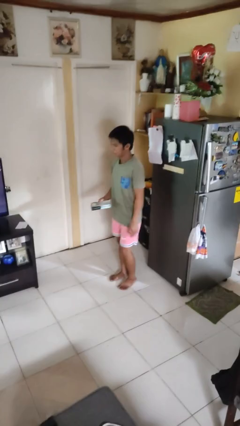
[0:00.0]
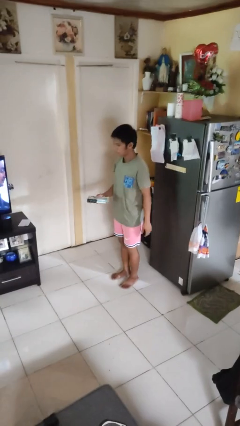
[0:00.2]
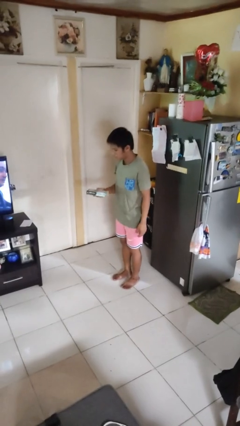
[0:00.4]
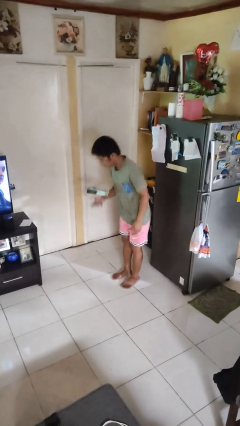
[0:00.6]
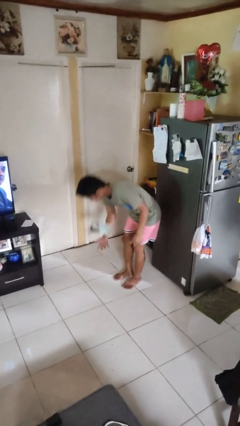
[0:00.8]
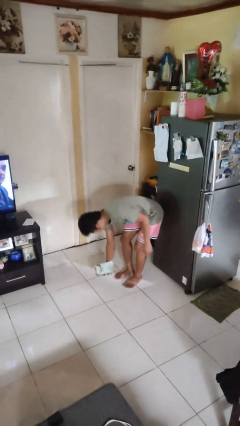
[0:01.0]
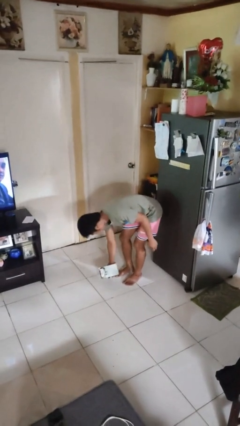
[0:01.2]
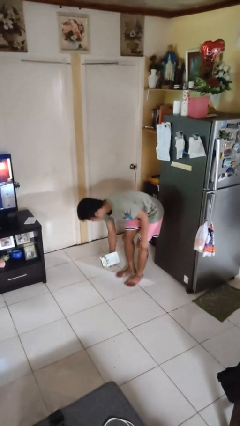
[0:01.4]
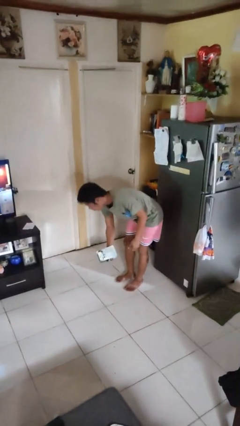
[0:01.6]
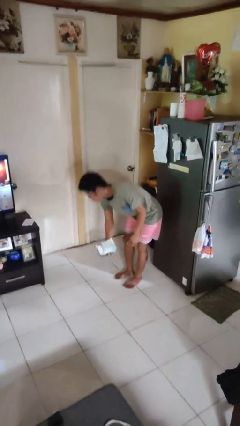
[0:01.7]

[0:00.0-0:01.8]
person drops object

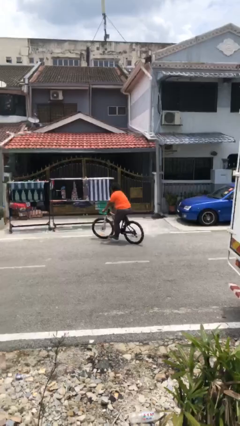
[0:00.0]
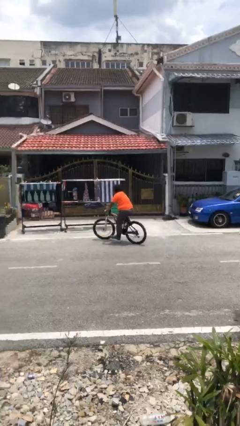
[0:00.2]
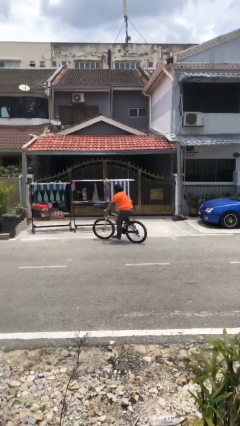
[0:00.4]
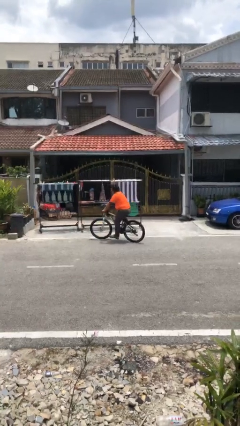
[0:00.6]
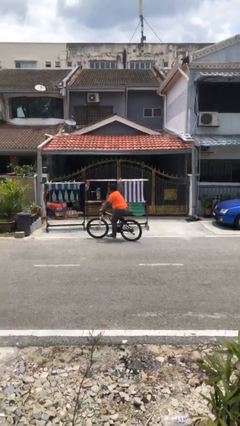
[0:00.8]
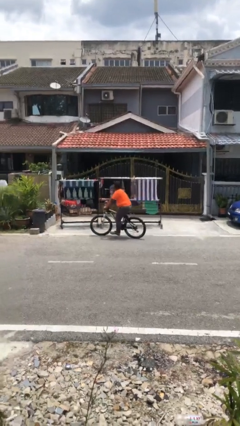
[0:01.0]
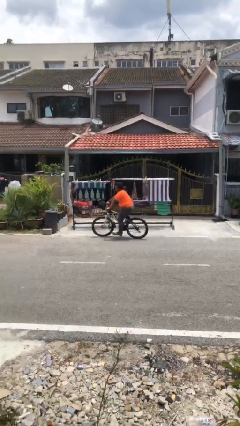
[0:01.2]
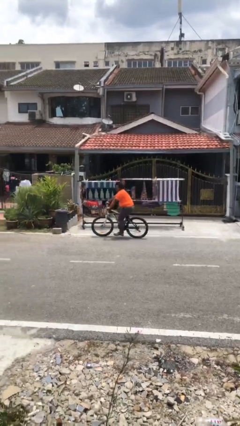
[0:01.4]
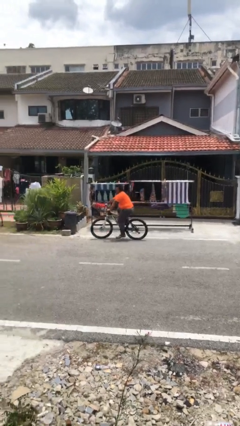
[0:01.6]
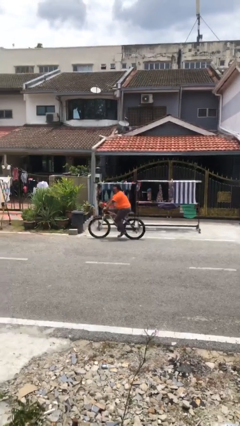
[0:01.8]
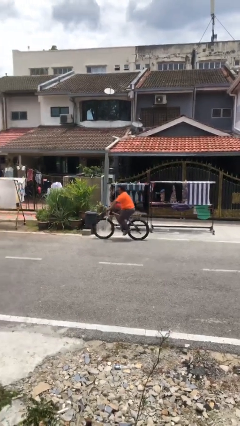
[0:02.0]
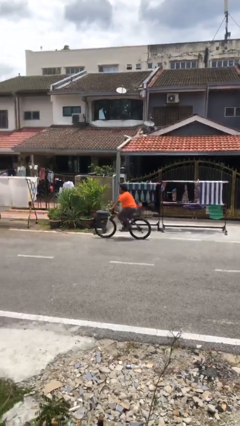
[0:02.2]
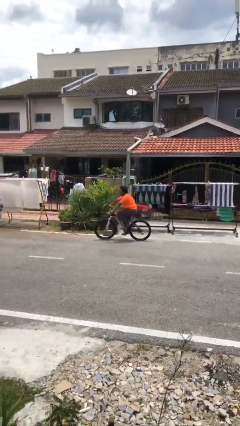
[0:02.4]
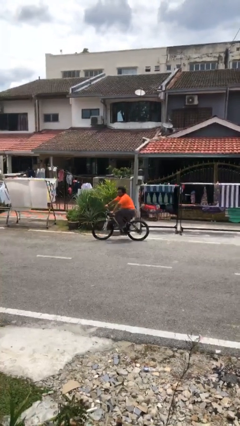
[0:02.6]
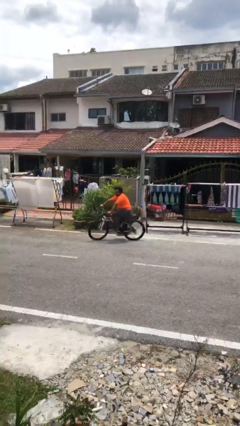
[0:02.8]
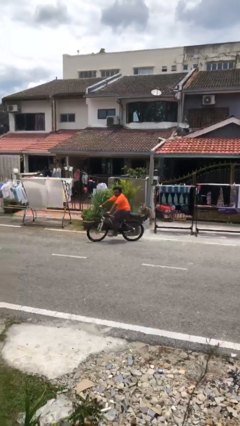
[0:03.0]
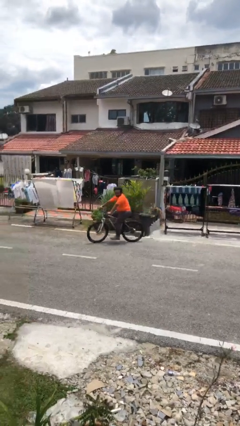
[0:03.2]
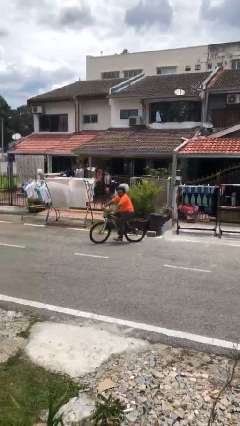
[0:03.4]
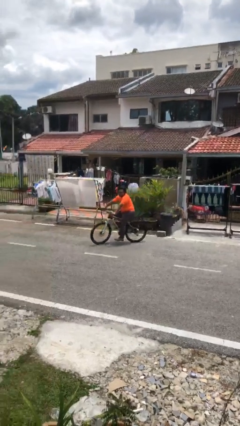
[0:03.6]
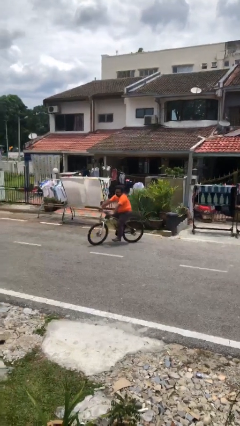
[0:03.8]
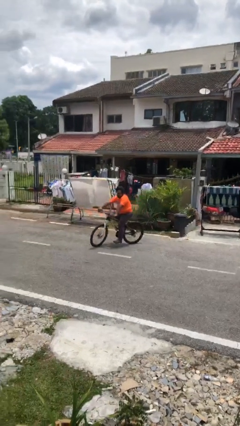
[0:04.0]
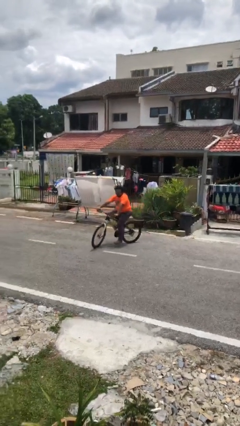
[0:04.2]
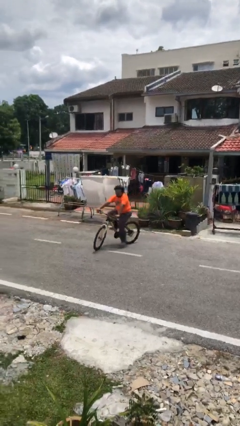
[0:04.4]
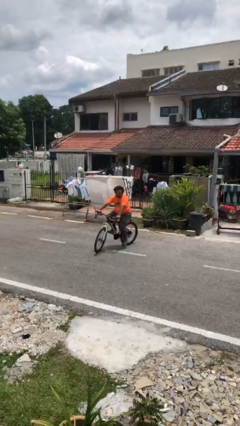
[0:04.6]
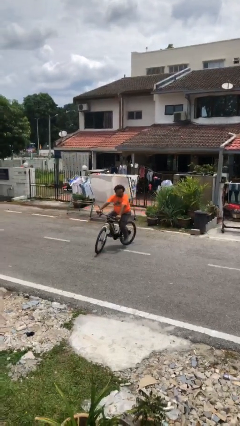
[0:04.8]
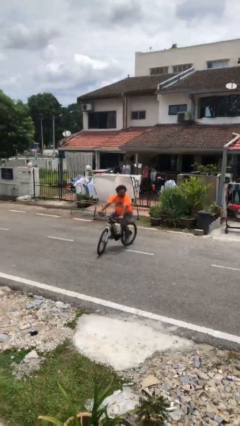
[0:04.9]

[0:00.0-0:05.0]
person rides bicycle

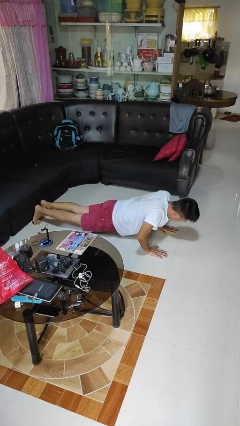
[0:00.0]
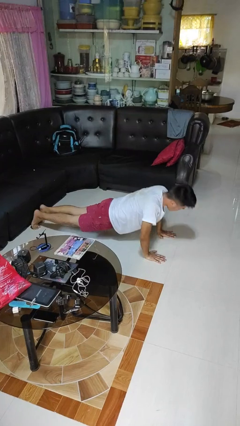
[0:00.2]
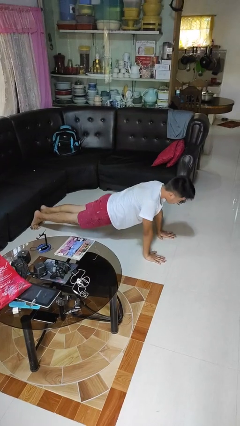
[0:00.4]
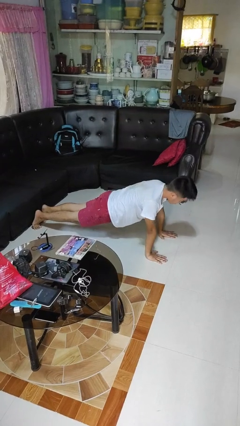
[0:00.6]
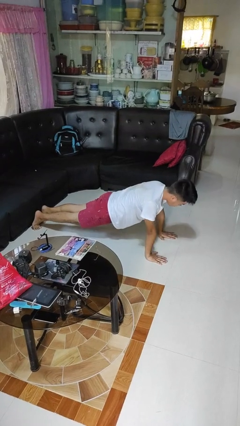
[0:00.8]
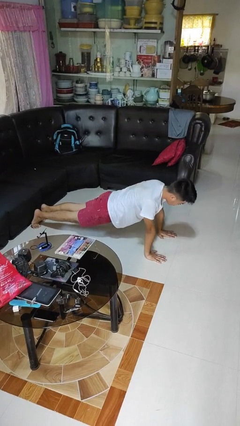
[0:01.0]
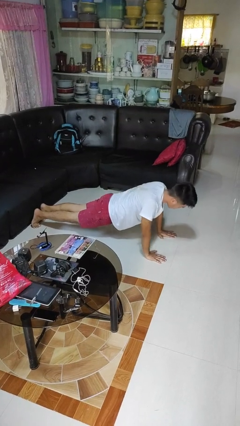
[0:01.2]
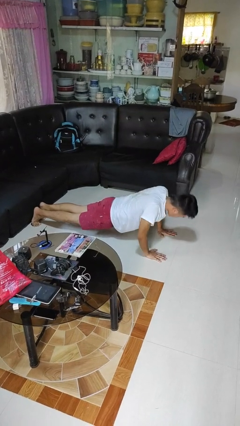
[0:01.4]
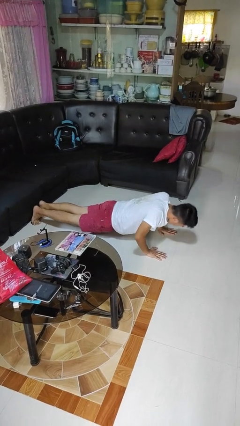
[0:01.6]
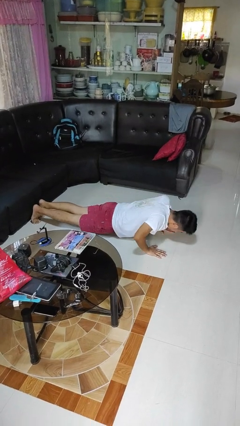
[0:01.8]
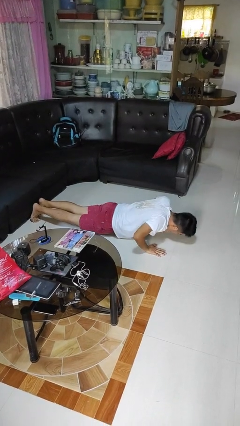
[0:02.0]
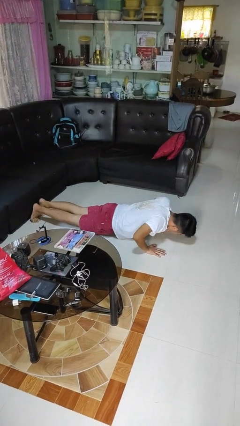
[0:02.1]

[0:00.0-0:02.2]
person exercises with pushup

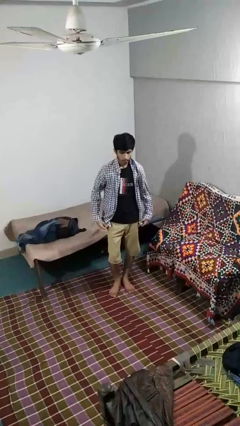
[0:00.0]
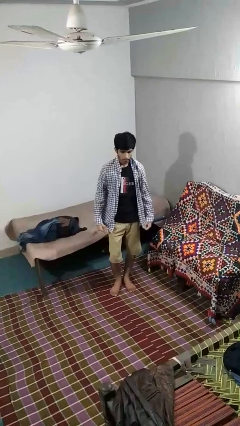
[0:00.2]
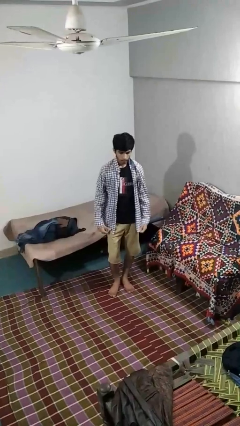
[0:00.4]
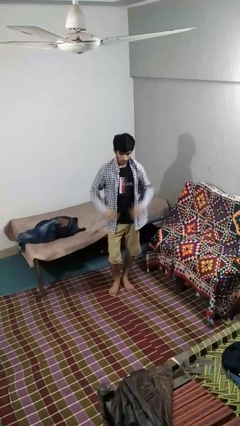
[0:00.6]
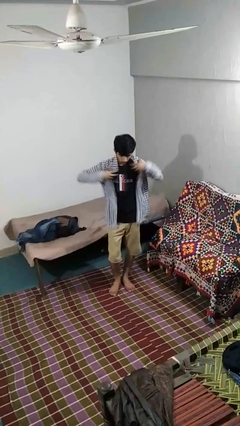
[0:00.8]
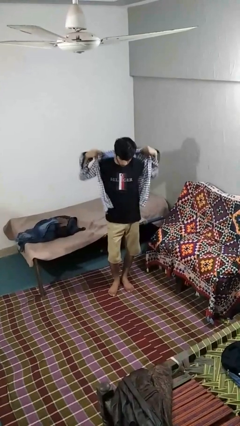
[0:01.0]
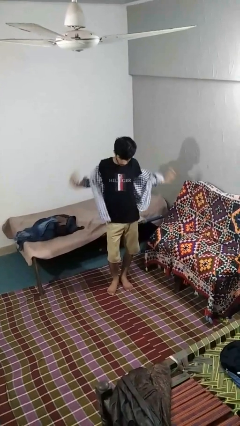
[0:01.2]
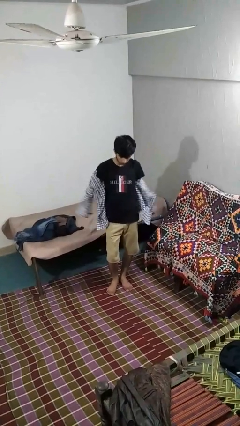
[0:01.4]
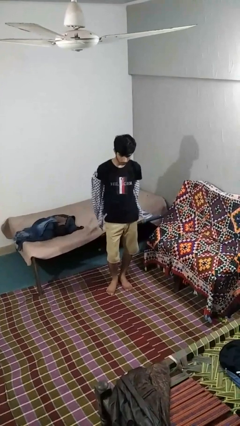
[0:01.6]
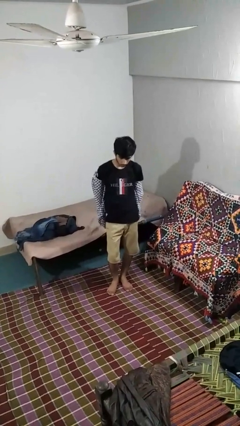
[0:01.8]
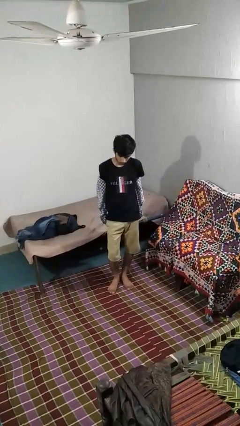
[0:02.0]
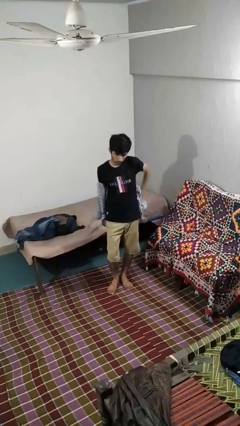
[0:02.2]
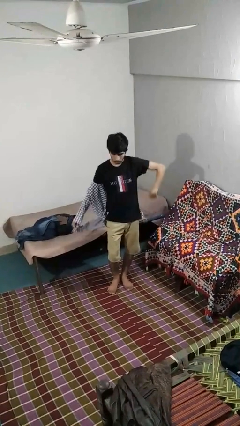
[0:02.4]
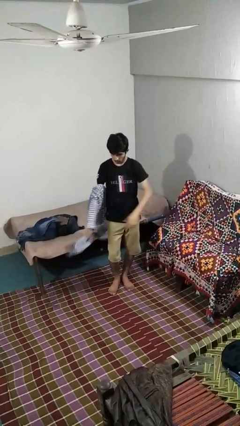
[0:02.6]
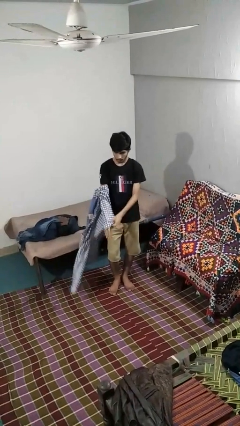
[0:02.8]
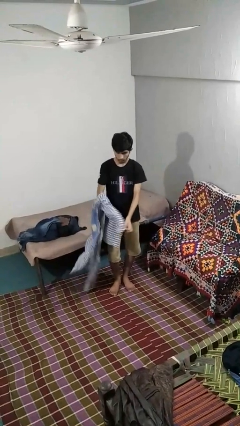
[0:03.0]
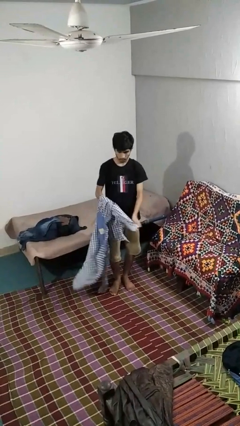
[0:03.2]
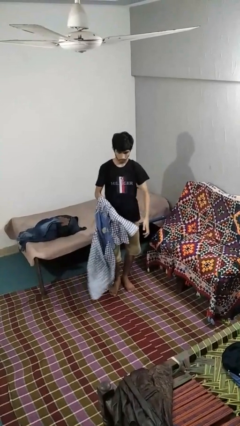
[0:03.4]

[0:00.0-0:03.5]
person takes off shirt

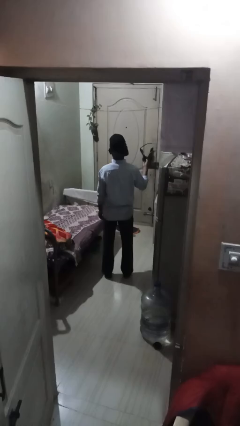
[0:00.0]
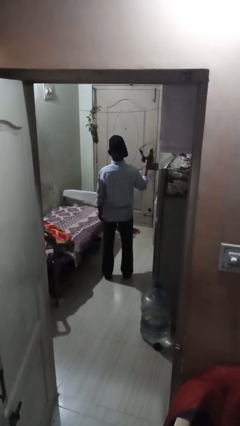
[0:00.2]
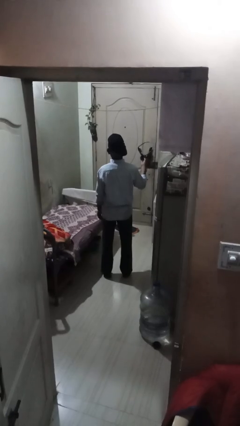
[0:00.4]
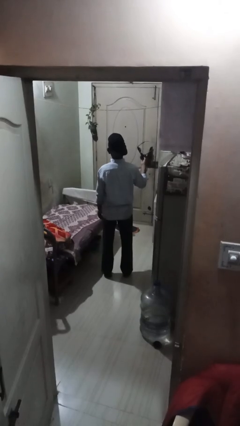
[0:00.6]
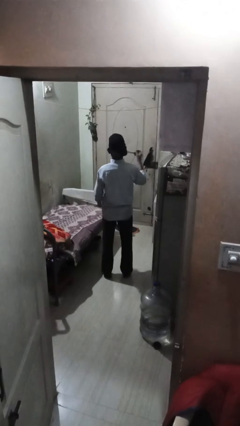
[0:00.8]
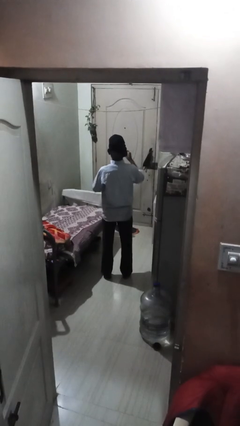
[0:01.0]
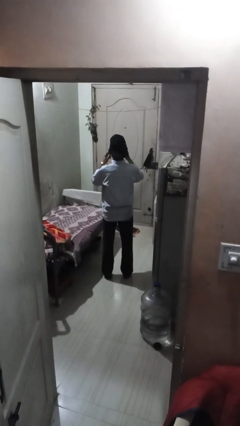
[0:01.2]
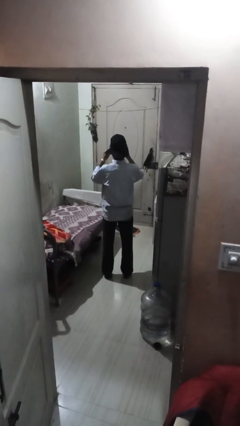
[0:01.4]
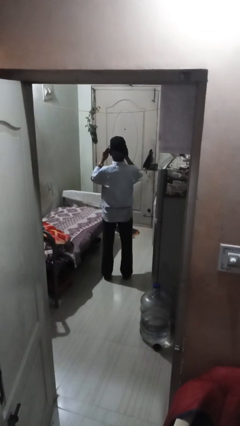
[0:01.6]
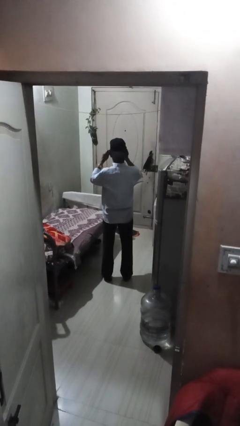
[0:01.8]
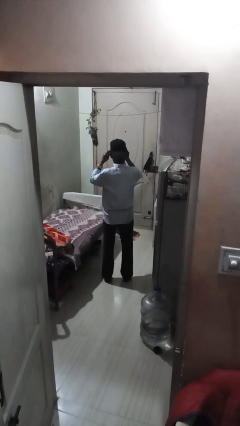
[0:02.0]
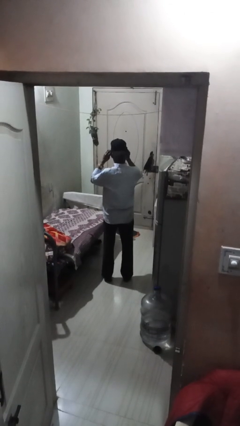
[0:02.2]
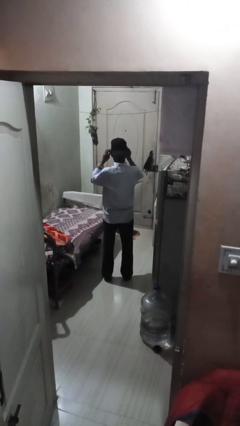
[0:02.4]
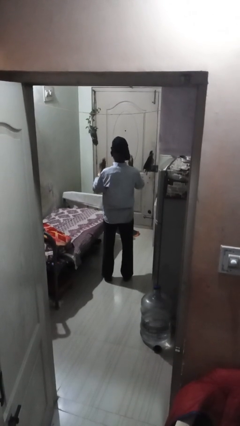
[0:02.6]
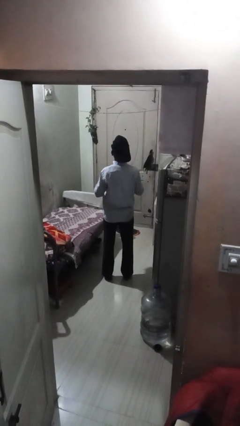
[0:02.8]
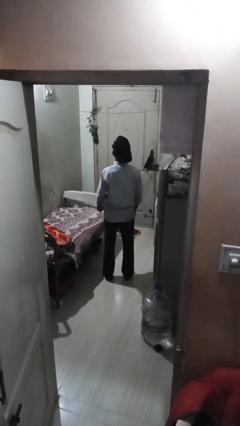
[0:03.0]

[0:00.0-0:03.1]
person puts on sunglasses

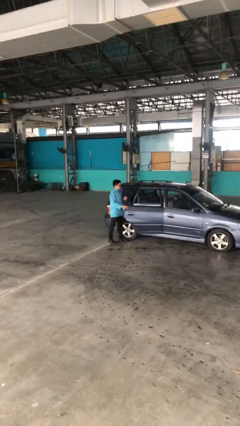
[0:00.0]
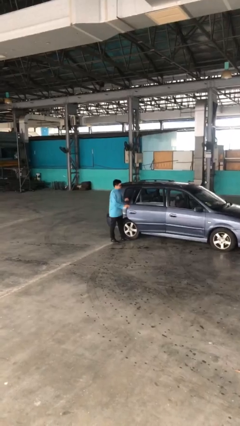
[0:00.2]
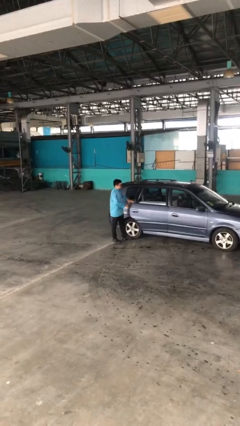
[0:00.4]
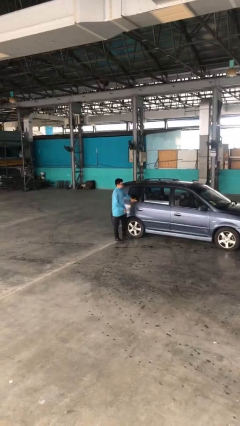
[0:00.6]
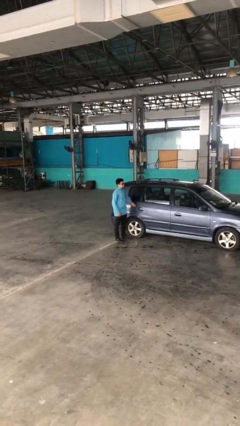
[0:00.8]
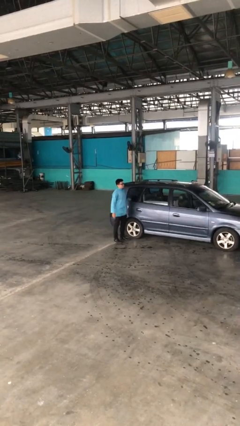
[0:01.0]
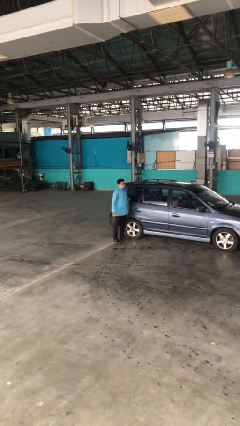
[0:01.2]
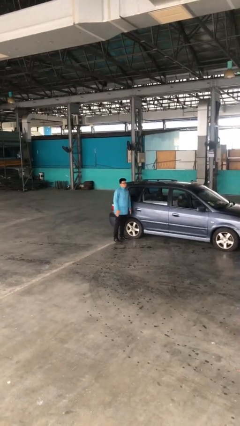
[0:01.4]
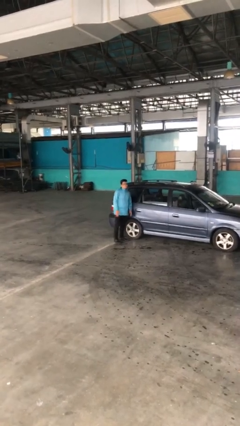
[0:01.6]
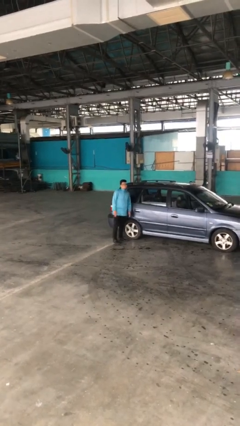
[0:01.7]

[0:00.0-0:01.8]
person closes car door

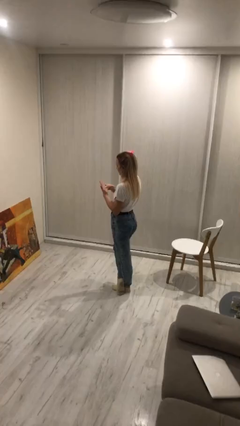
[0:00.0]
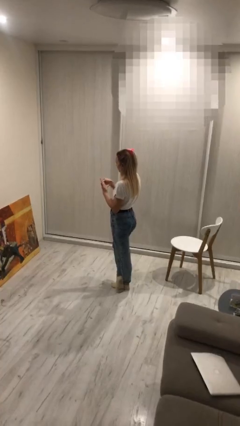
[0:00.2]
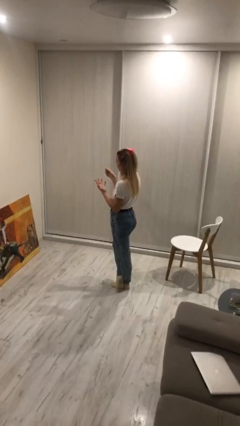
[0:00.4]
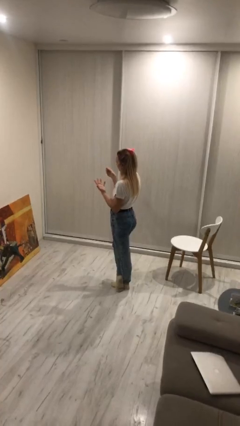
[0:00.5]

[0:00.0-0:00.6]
person takes off ring
